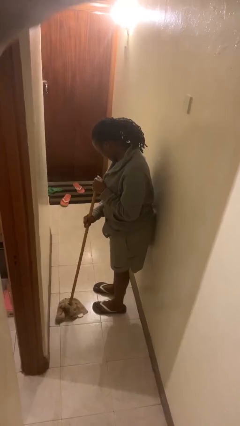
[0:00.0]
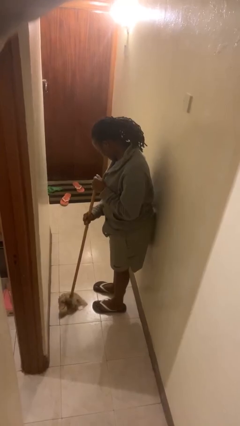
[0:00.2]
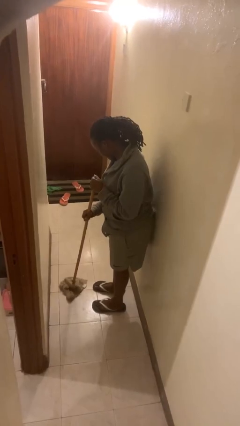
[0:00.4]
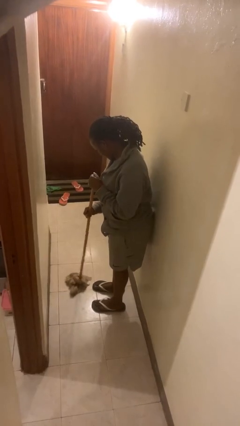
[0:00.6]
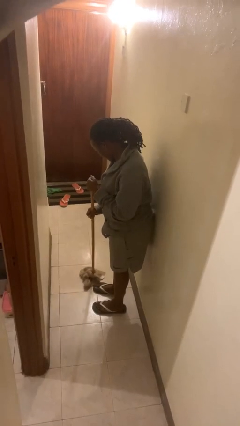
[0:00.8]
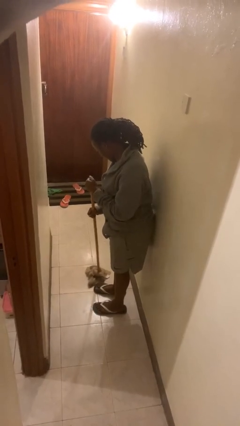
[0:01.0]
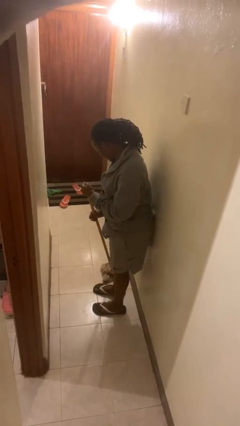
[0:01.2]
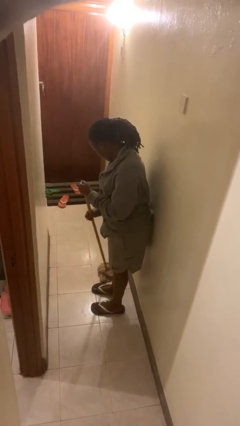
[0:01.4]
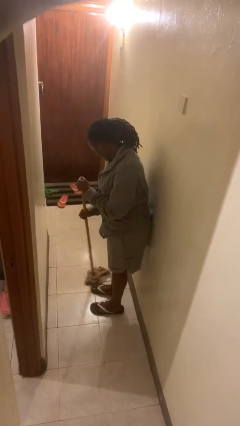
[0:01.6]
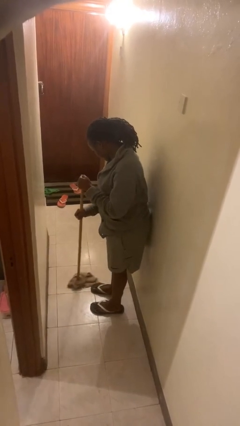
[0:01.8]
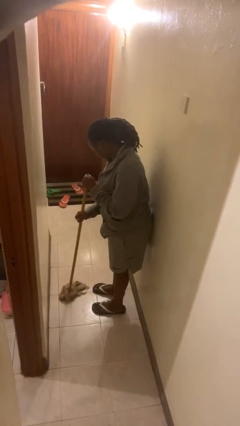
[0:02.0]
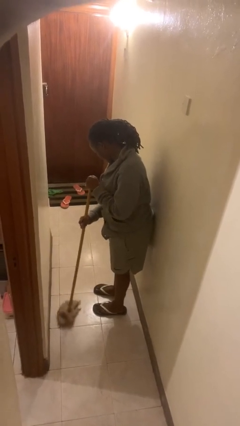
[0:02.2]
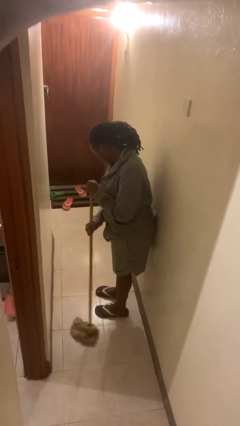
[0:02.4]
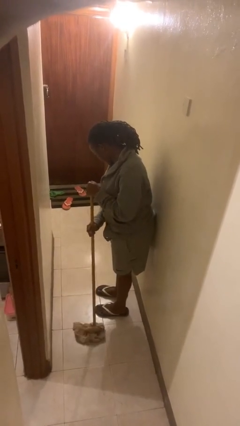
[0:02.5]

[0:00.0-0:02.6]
person mops

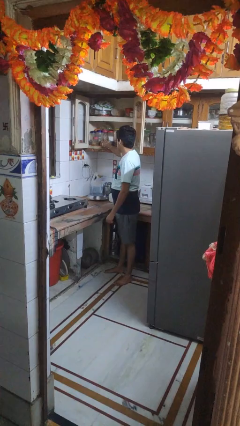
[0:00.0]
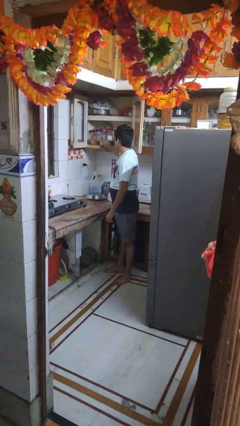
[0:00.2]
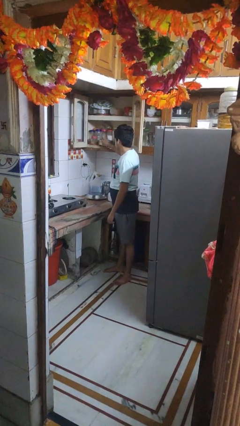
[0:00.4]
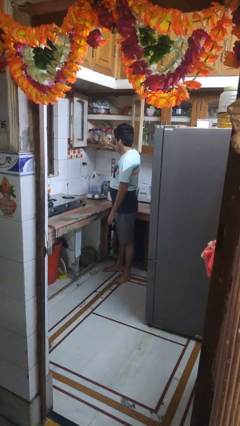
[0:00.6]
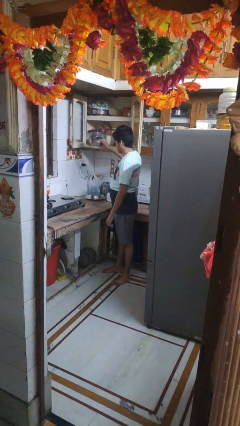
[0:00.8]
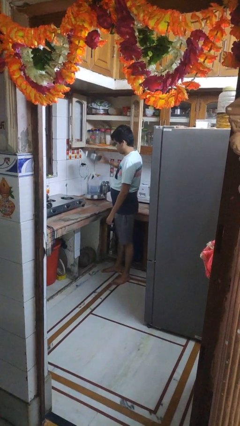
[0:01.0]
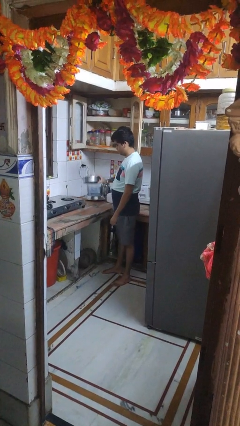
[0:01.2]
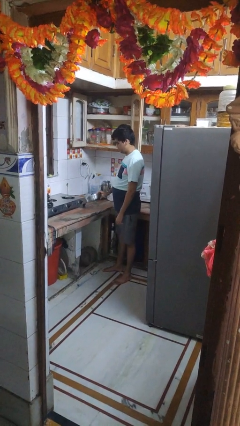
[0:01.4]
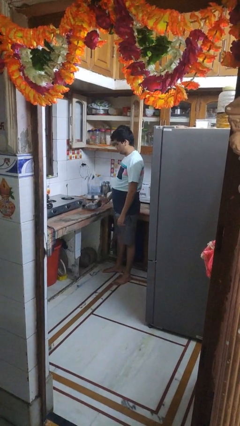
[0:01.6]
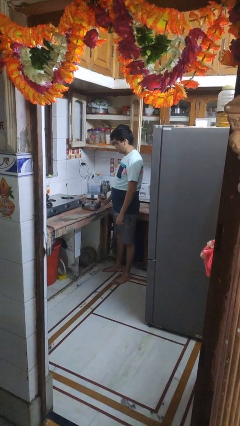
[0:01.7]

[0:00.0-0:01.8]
person takes object from cabinet

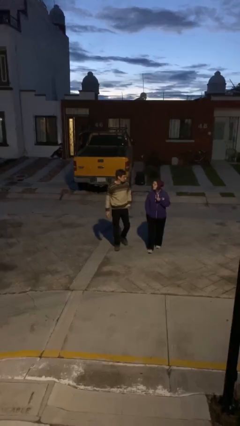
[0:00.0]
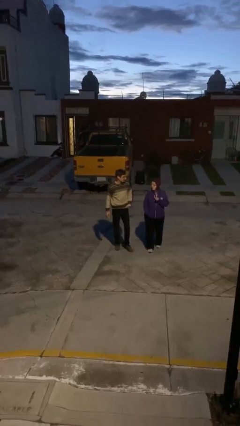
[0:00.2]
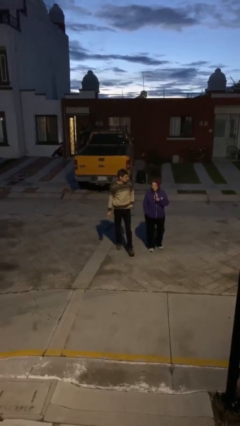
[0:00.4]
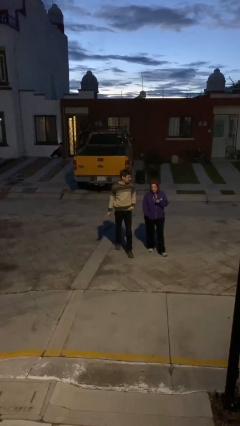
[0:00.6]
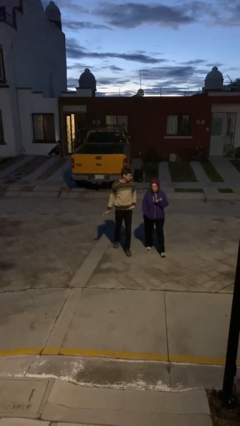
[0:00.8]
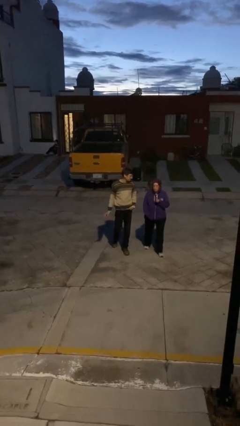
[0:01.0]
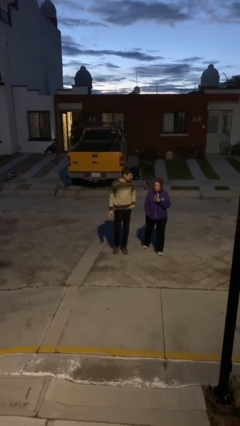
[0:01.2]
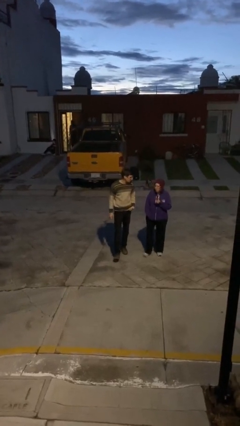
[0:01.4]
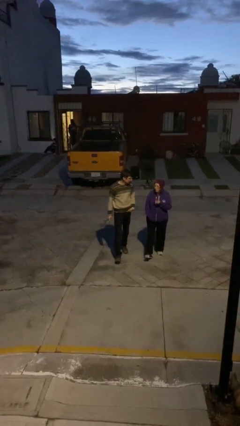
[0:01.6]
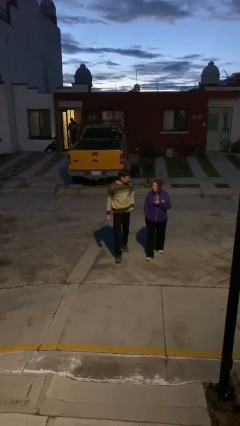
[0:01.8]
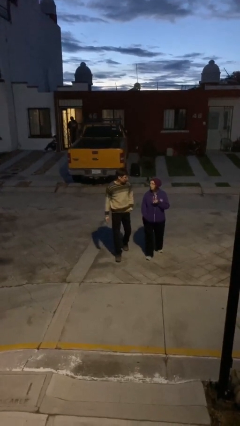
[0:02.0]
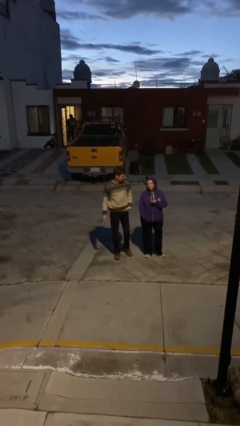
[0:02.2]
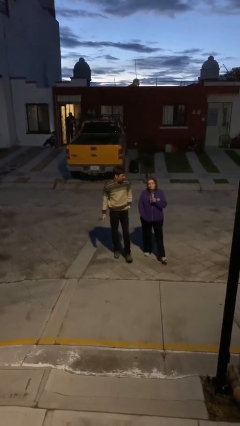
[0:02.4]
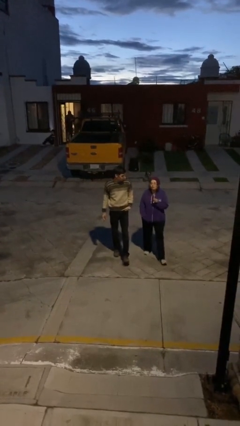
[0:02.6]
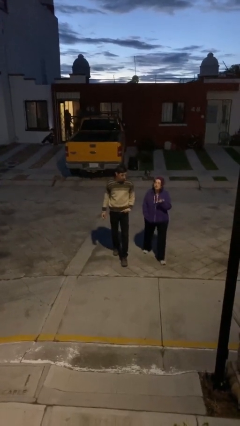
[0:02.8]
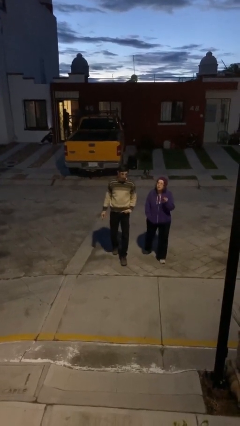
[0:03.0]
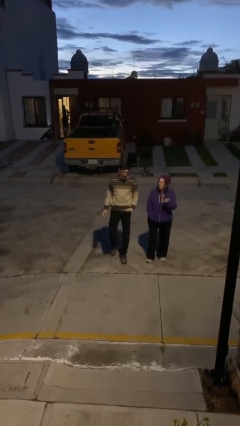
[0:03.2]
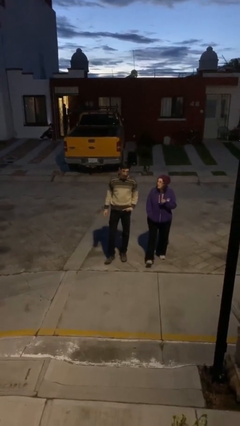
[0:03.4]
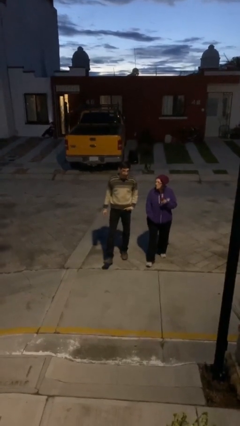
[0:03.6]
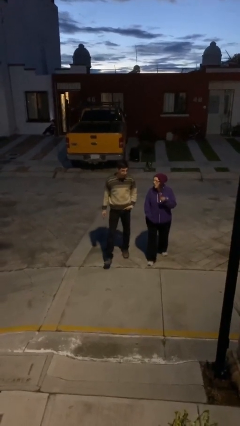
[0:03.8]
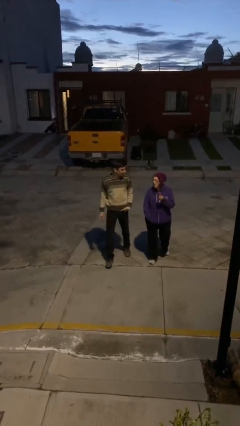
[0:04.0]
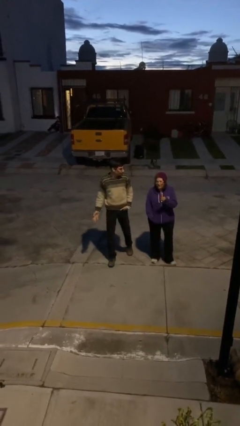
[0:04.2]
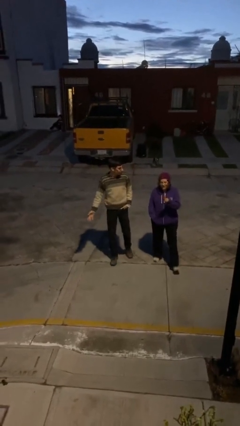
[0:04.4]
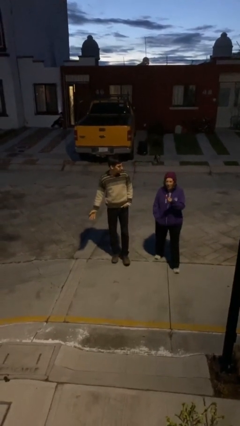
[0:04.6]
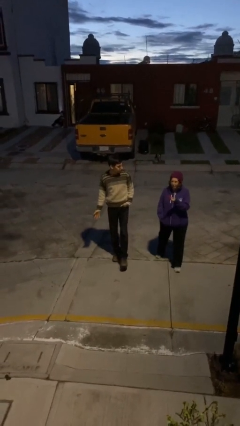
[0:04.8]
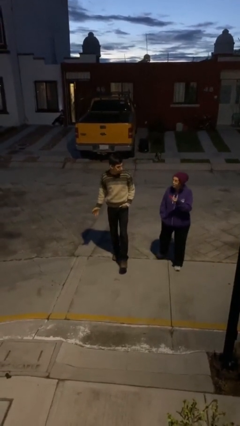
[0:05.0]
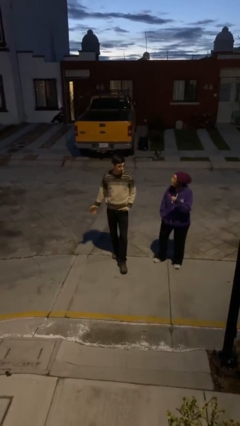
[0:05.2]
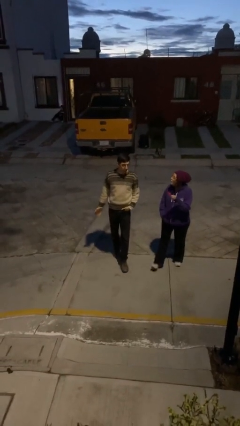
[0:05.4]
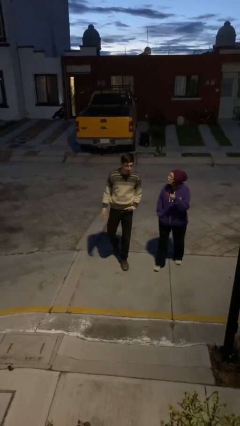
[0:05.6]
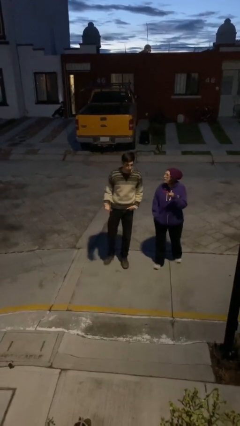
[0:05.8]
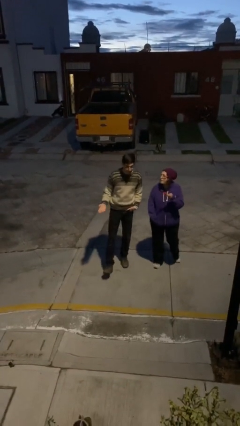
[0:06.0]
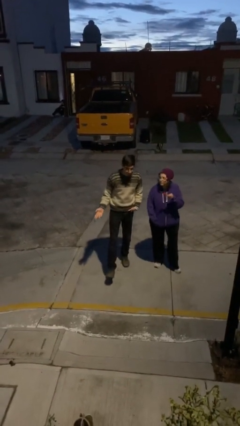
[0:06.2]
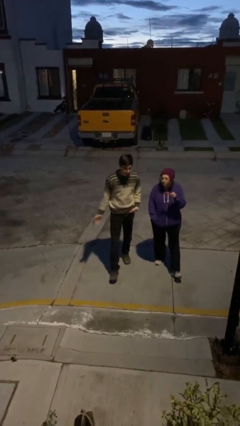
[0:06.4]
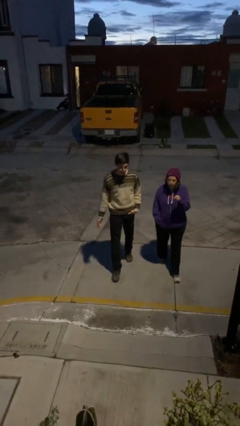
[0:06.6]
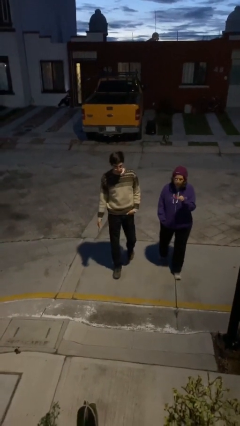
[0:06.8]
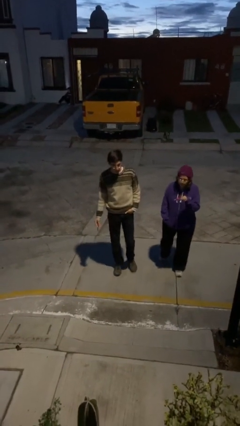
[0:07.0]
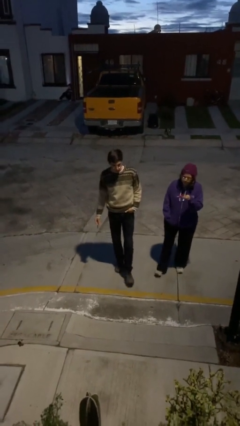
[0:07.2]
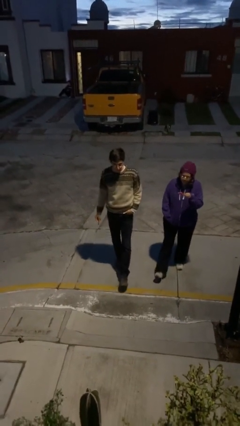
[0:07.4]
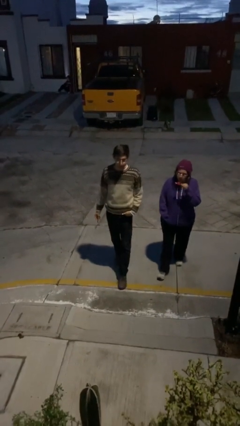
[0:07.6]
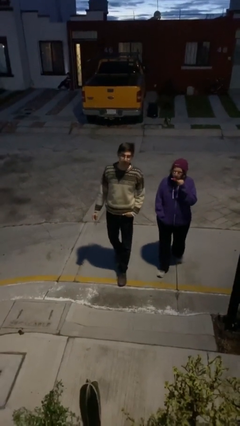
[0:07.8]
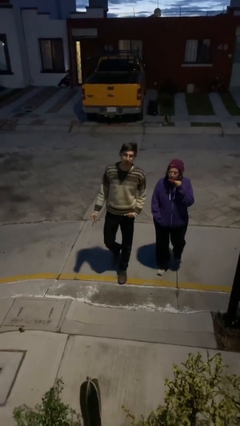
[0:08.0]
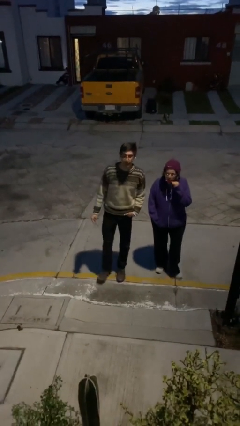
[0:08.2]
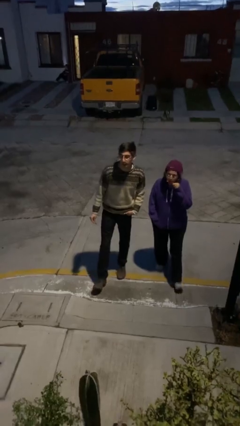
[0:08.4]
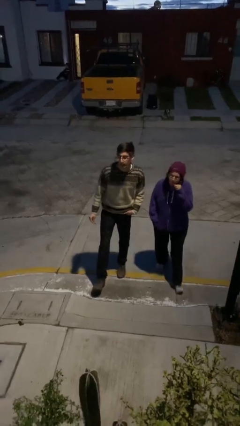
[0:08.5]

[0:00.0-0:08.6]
person talks to person

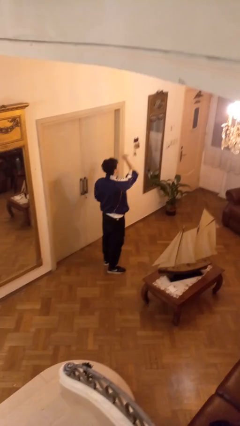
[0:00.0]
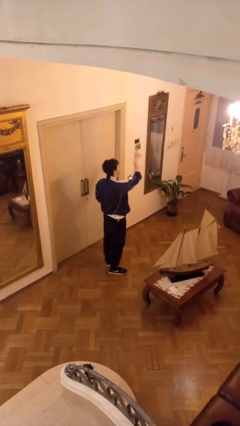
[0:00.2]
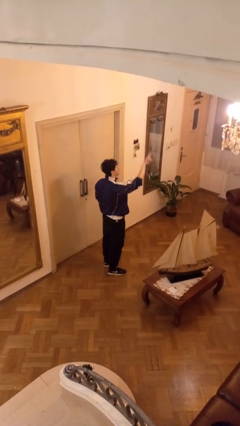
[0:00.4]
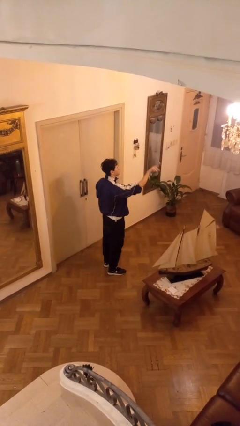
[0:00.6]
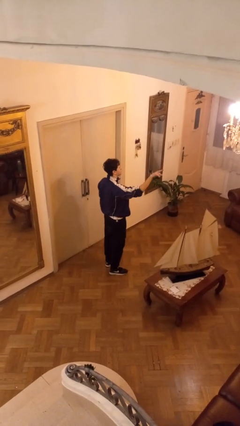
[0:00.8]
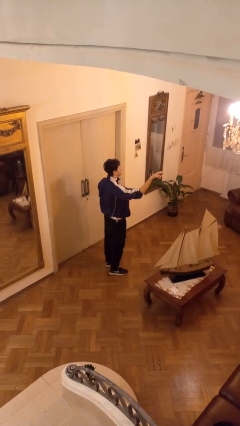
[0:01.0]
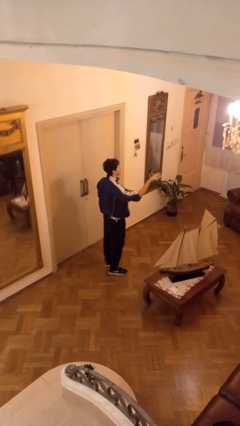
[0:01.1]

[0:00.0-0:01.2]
person gestures swipe right

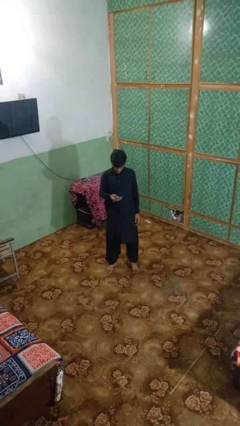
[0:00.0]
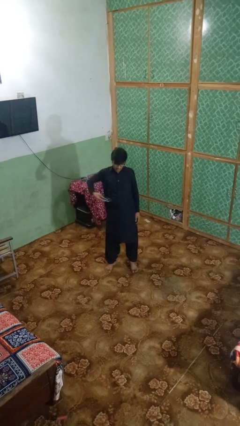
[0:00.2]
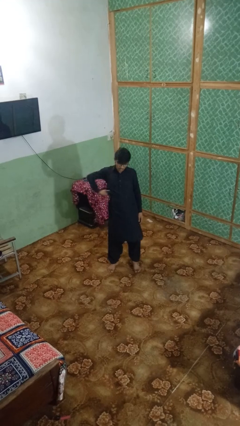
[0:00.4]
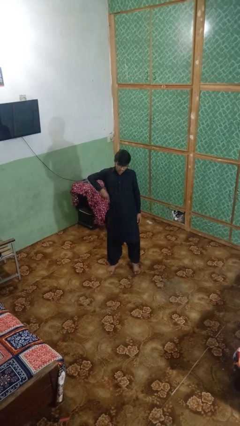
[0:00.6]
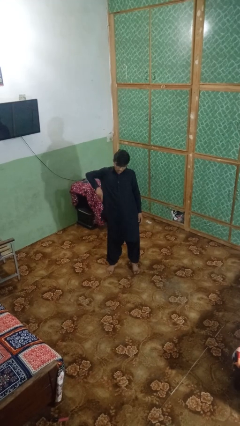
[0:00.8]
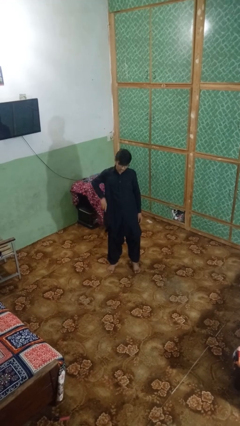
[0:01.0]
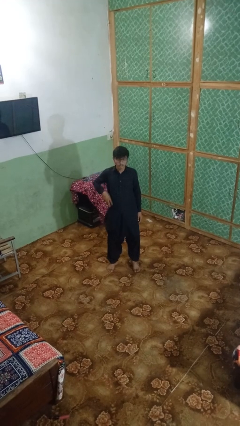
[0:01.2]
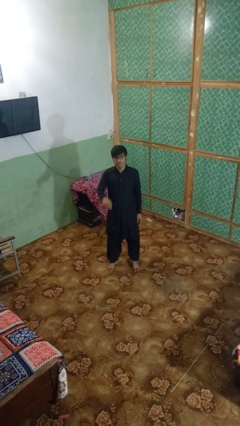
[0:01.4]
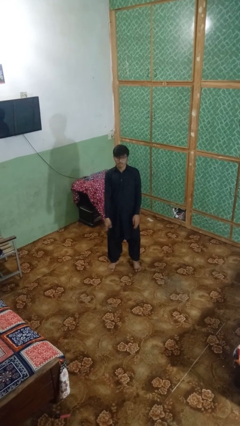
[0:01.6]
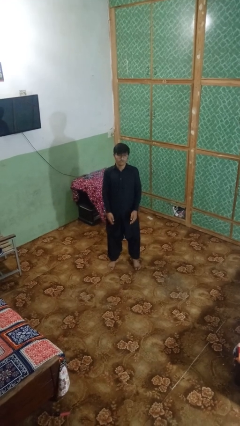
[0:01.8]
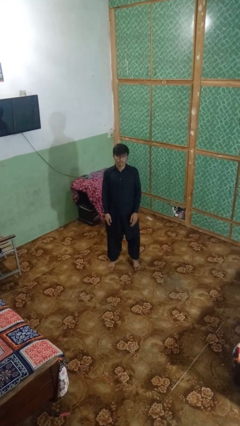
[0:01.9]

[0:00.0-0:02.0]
person puts phone into pocket

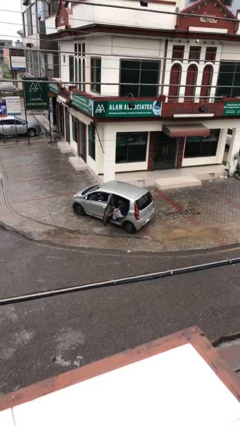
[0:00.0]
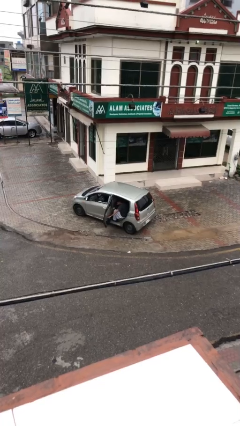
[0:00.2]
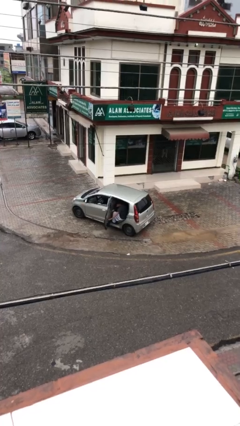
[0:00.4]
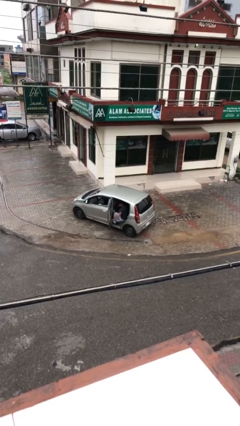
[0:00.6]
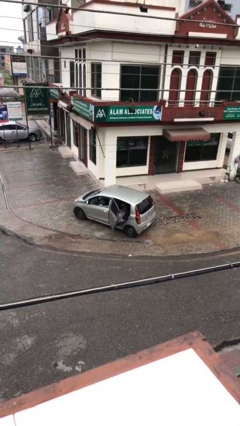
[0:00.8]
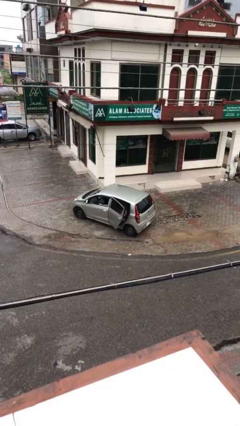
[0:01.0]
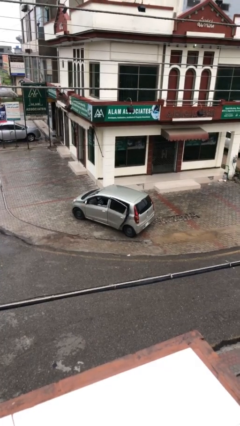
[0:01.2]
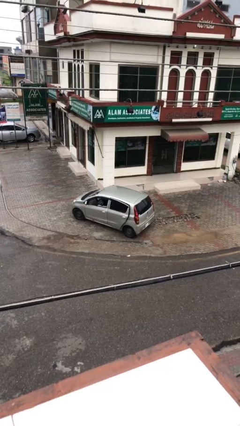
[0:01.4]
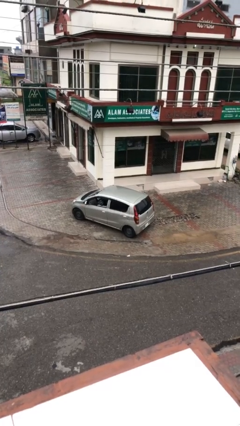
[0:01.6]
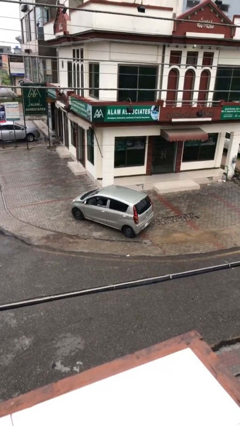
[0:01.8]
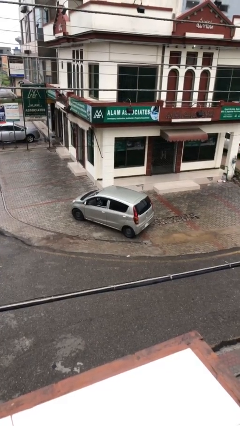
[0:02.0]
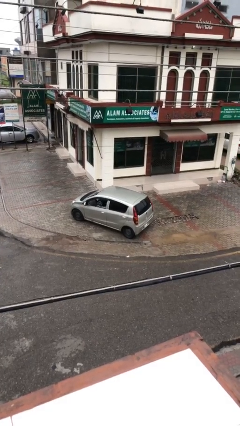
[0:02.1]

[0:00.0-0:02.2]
person closes car door
